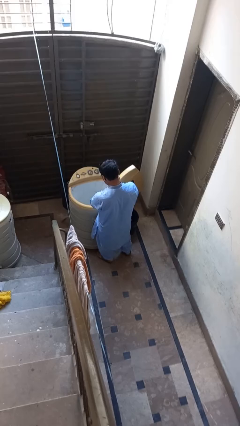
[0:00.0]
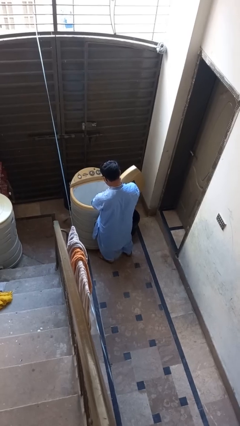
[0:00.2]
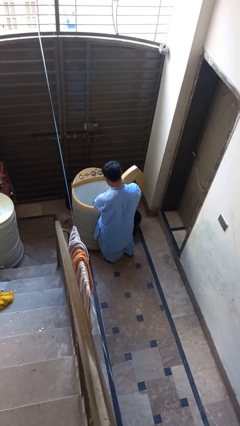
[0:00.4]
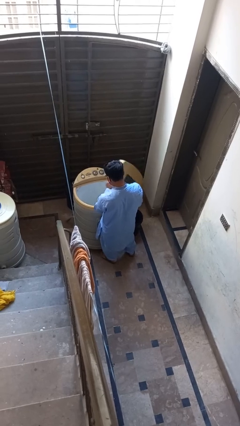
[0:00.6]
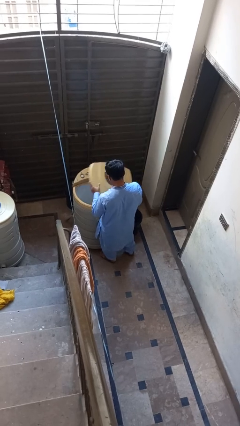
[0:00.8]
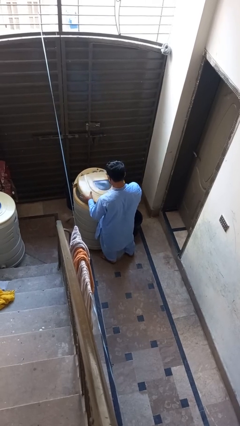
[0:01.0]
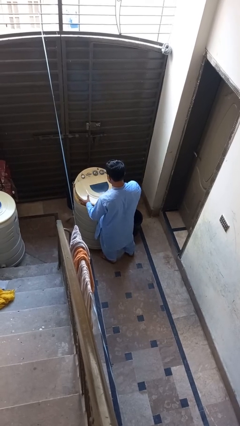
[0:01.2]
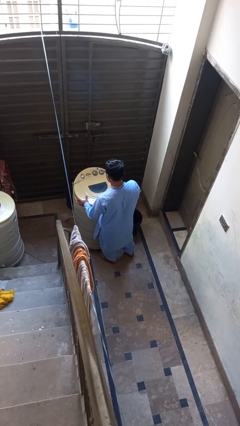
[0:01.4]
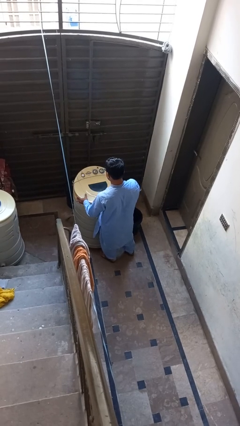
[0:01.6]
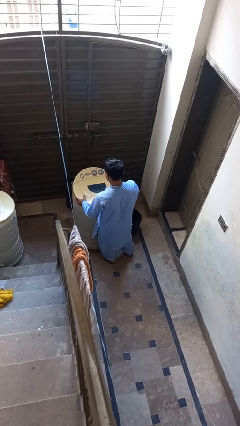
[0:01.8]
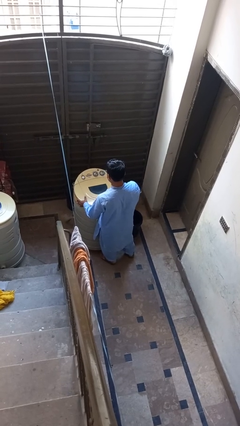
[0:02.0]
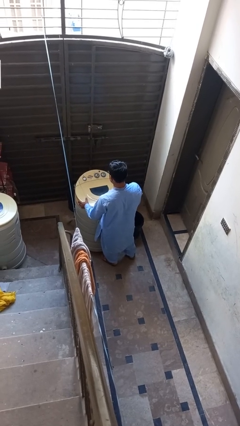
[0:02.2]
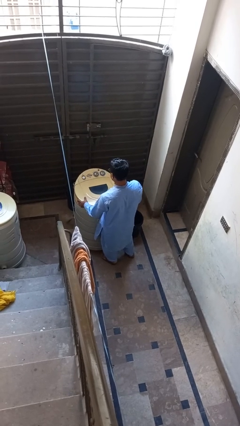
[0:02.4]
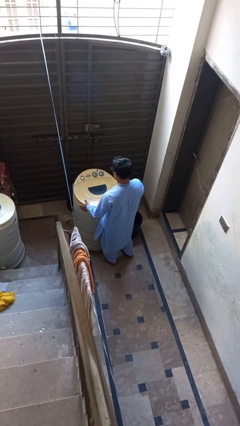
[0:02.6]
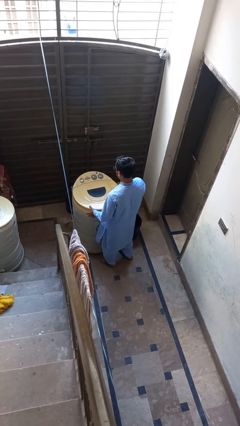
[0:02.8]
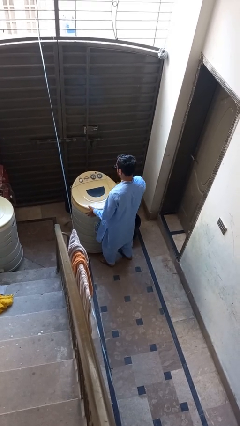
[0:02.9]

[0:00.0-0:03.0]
person closes clothes washer

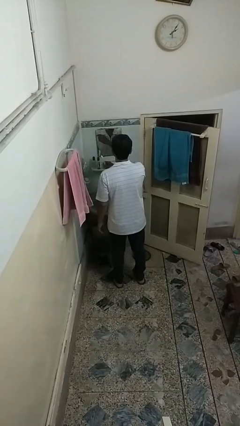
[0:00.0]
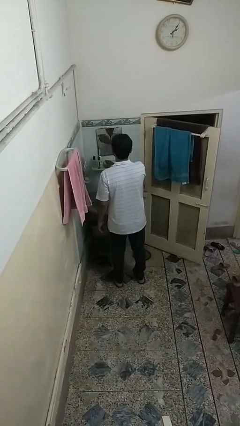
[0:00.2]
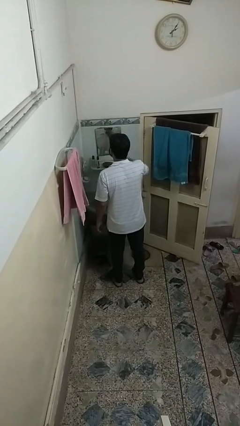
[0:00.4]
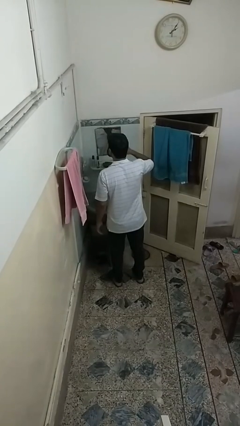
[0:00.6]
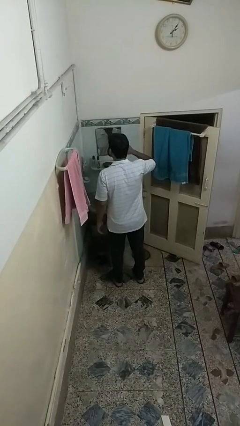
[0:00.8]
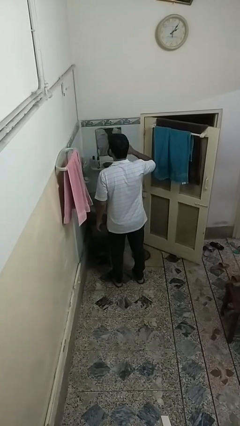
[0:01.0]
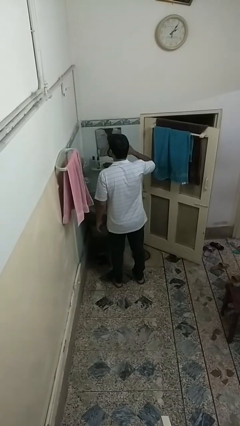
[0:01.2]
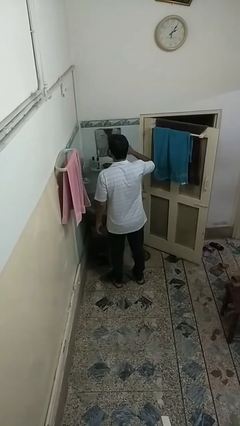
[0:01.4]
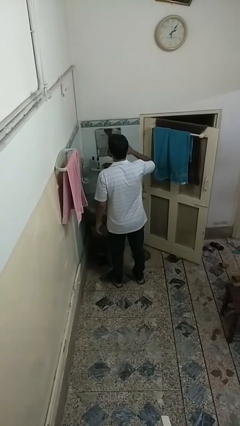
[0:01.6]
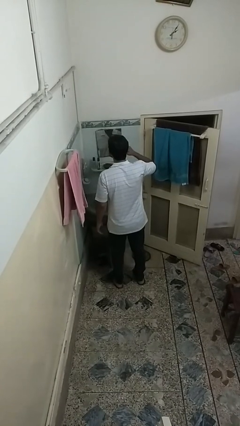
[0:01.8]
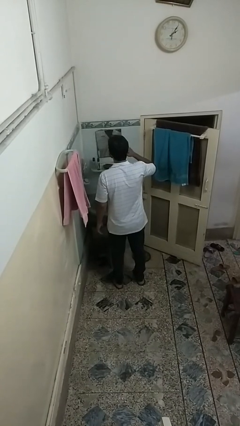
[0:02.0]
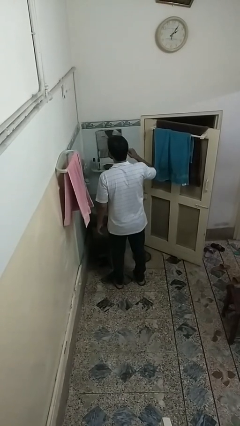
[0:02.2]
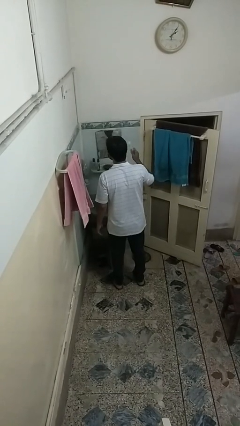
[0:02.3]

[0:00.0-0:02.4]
person brushes teeth

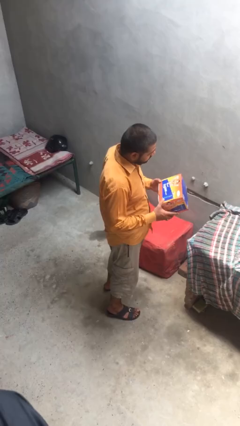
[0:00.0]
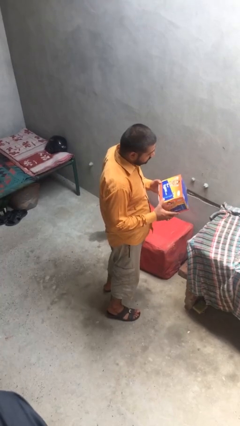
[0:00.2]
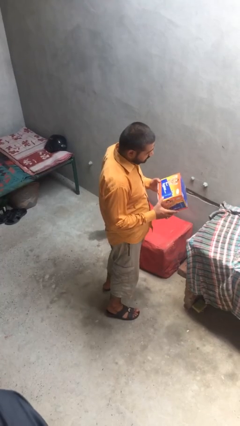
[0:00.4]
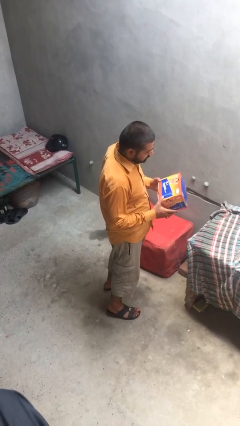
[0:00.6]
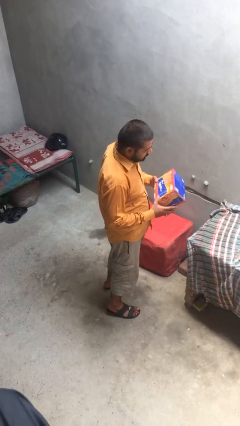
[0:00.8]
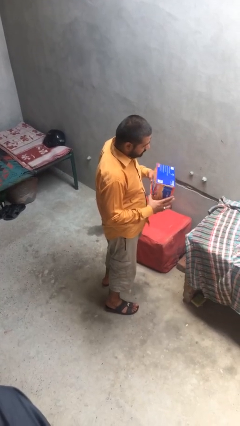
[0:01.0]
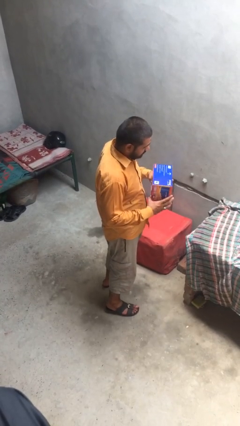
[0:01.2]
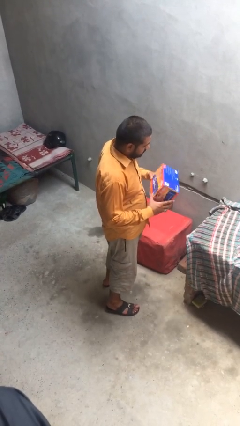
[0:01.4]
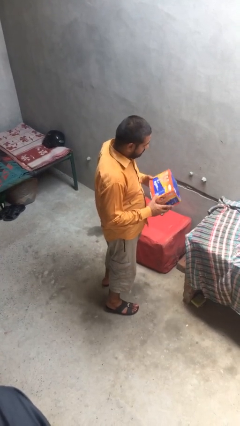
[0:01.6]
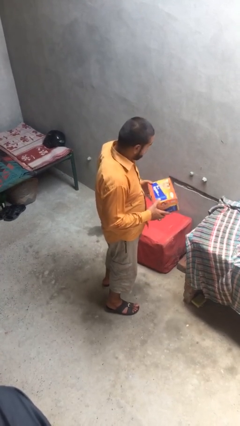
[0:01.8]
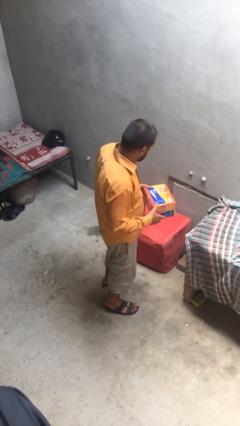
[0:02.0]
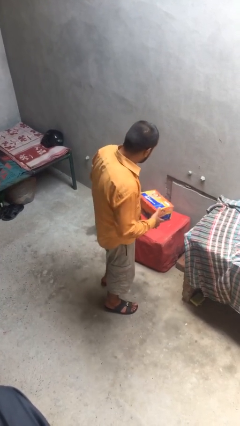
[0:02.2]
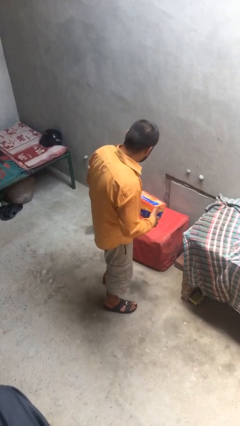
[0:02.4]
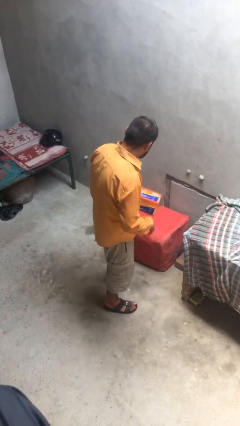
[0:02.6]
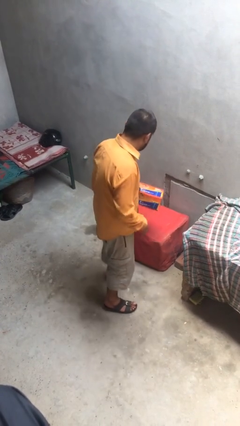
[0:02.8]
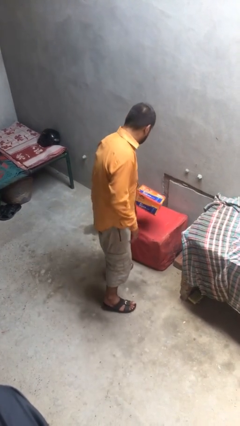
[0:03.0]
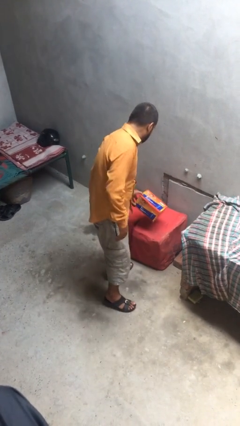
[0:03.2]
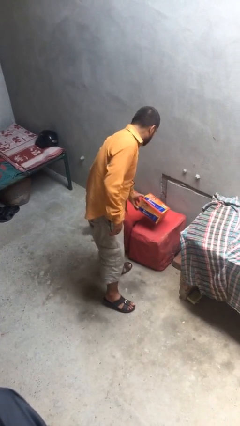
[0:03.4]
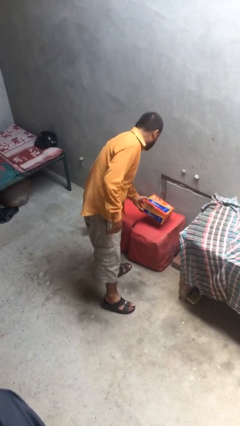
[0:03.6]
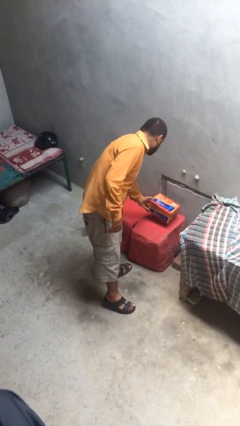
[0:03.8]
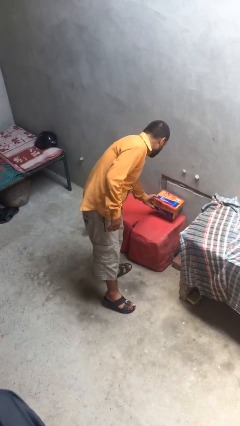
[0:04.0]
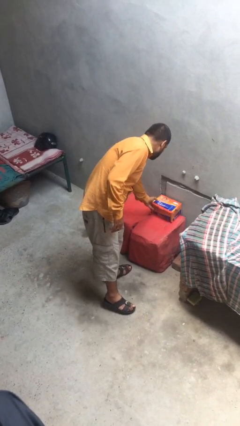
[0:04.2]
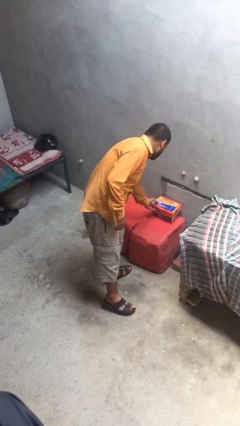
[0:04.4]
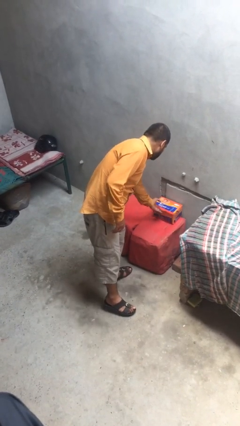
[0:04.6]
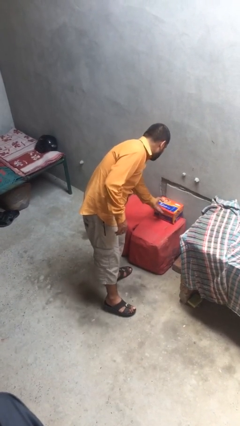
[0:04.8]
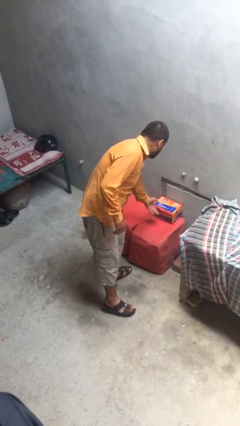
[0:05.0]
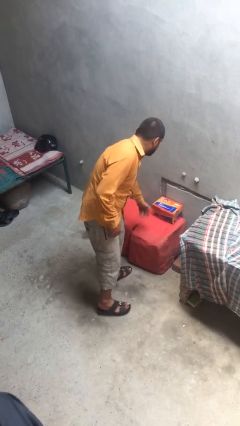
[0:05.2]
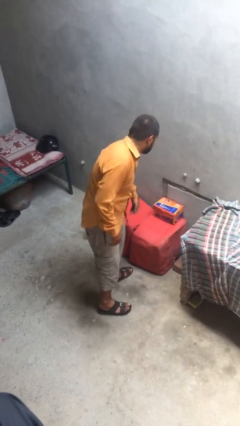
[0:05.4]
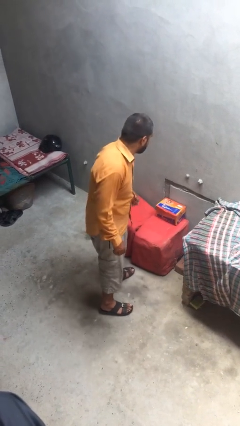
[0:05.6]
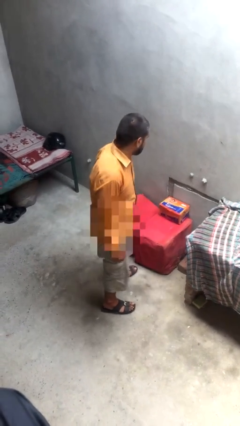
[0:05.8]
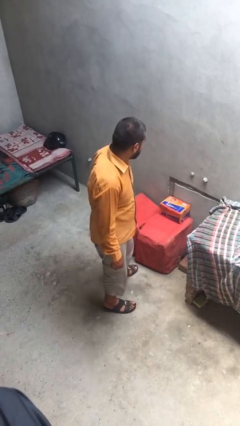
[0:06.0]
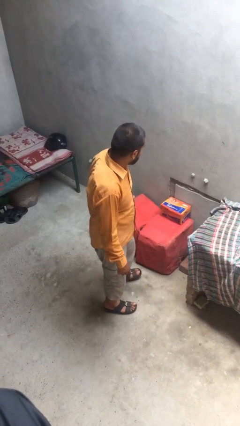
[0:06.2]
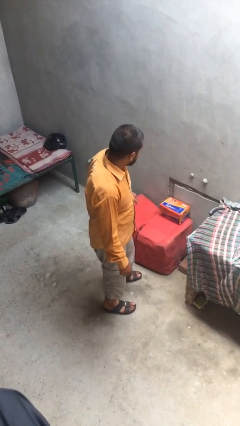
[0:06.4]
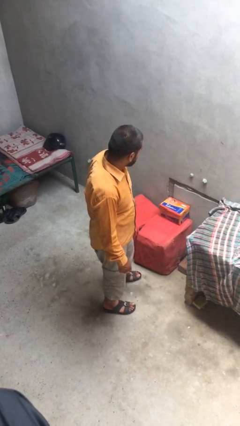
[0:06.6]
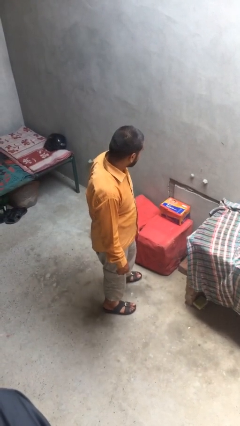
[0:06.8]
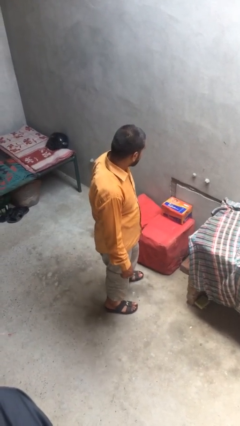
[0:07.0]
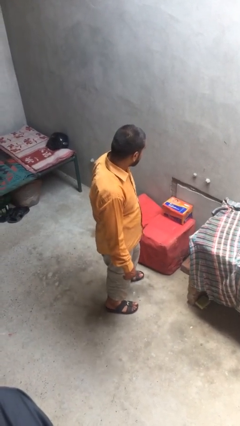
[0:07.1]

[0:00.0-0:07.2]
person puts down object on table

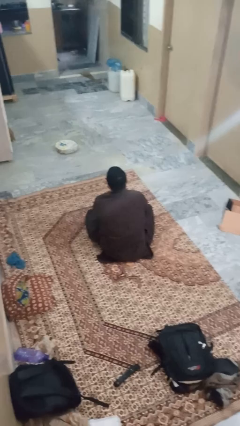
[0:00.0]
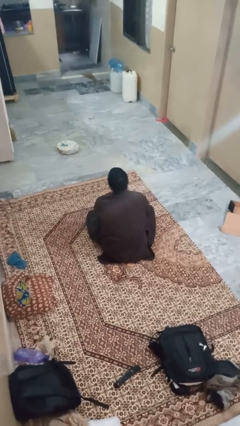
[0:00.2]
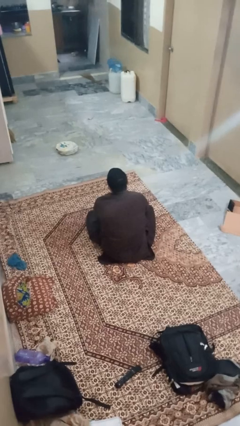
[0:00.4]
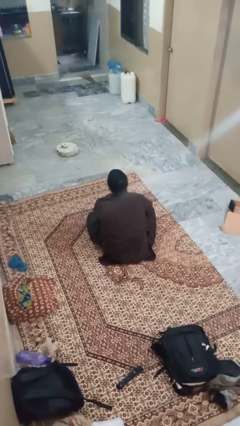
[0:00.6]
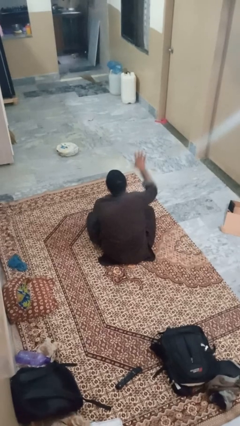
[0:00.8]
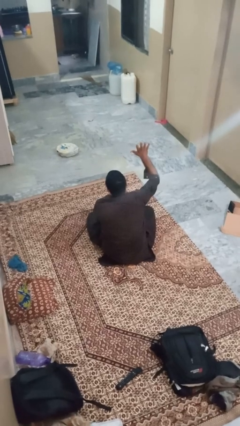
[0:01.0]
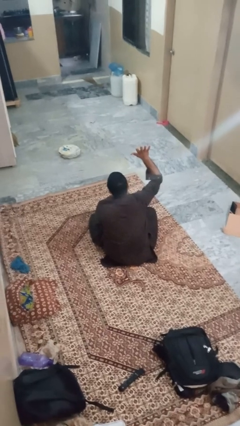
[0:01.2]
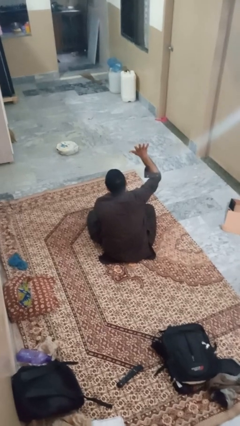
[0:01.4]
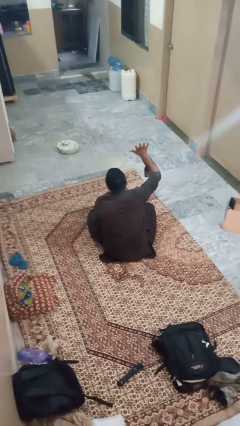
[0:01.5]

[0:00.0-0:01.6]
person gestures number five

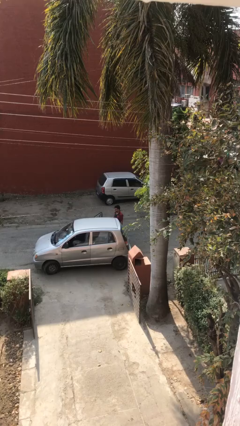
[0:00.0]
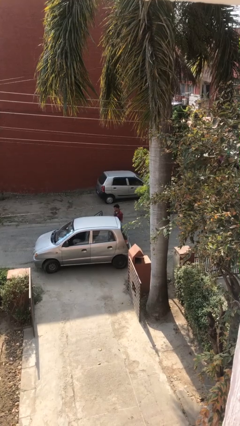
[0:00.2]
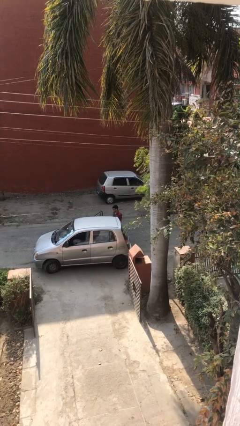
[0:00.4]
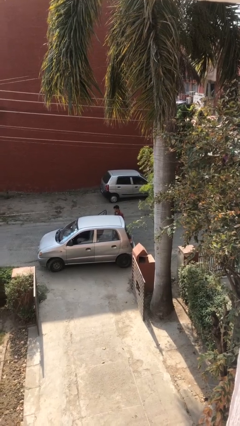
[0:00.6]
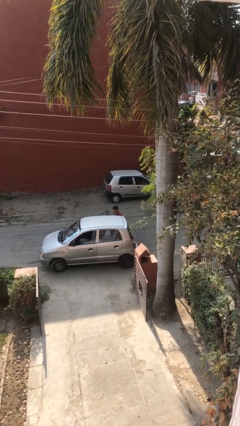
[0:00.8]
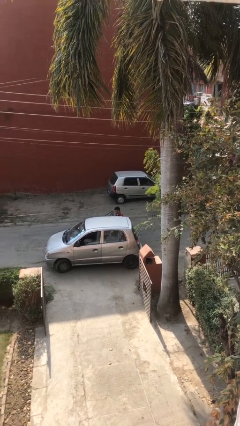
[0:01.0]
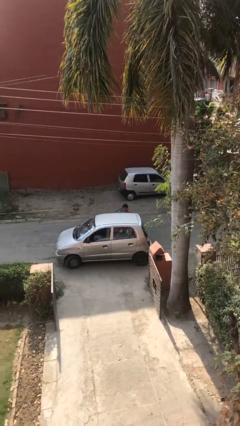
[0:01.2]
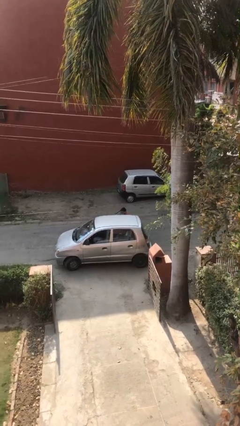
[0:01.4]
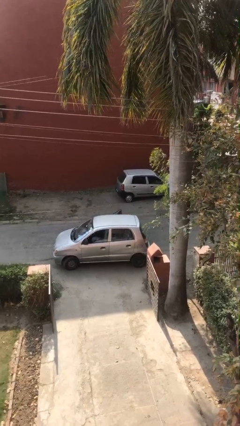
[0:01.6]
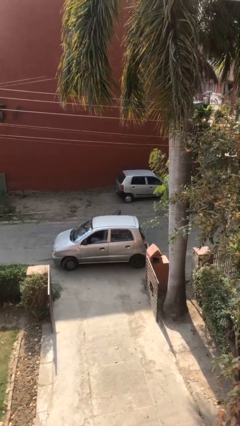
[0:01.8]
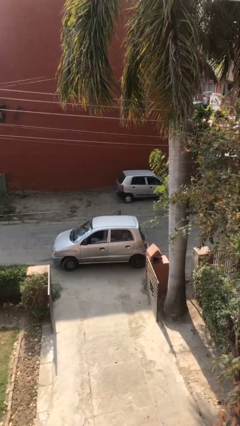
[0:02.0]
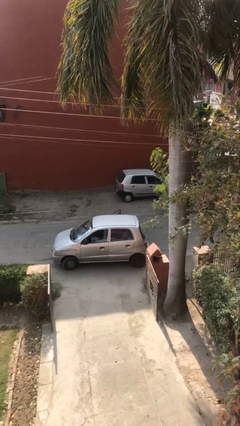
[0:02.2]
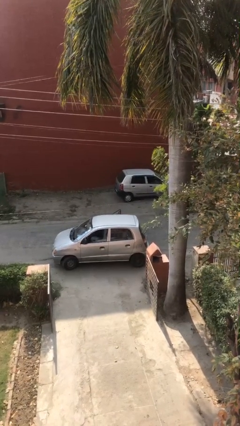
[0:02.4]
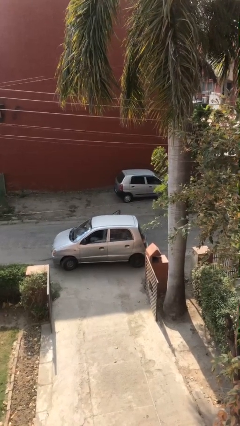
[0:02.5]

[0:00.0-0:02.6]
person enters car

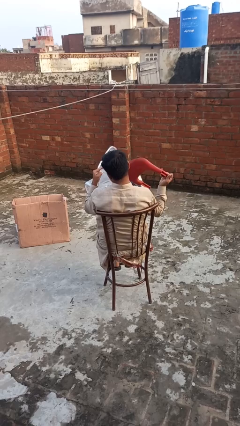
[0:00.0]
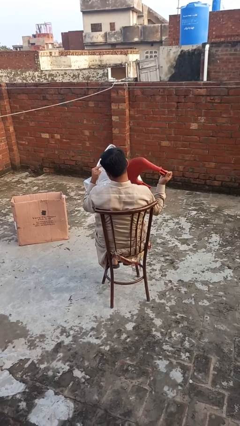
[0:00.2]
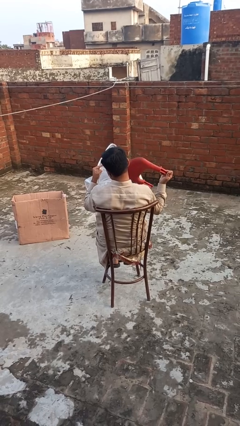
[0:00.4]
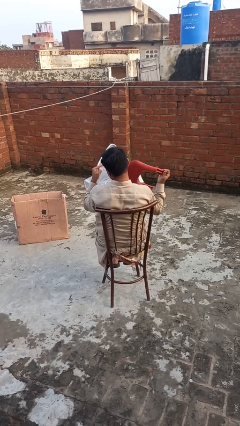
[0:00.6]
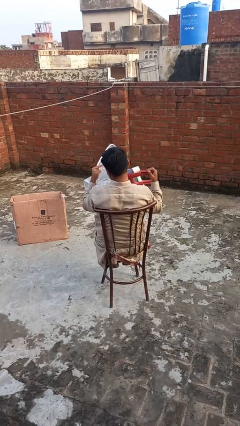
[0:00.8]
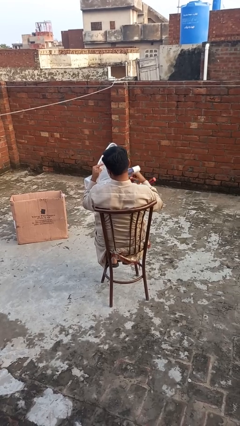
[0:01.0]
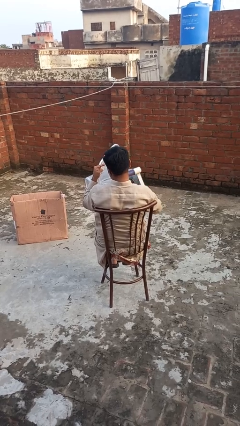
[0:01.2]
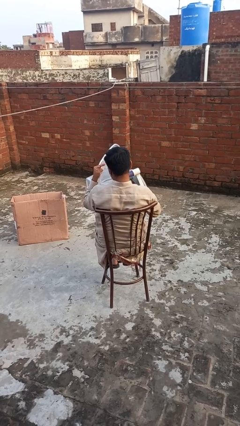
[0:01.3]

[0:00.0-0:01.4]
person searches in bag
